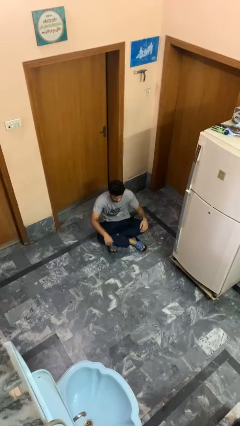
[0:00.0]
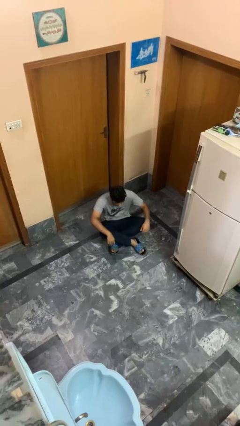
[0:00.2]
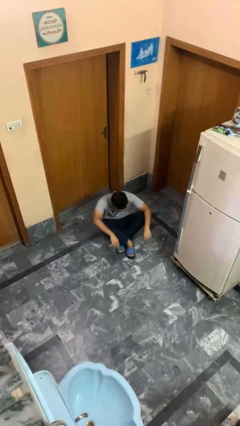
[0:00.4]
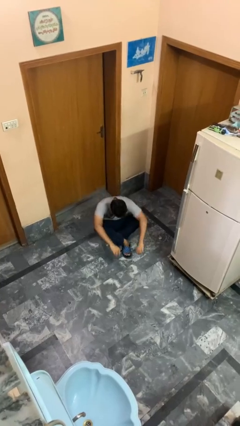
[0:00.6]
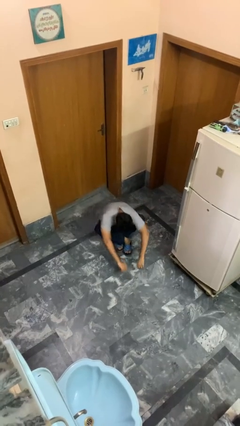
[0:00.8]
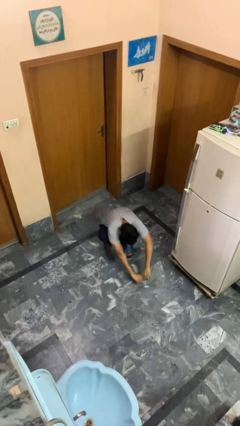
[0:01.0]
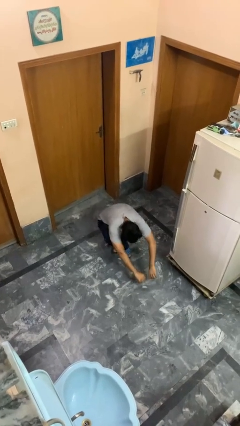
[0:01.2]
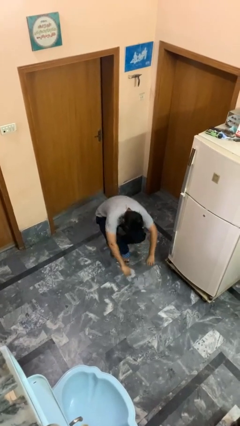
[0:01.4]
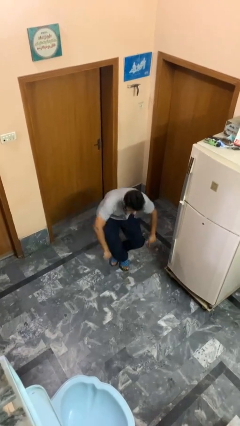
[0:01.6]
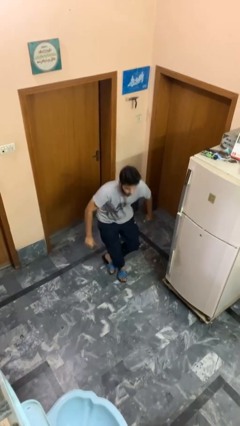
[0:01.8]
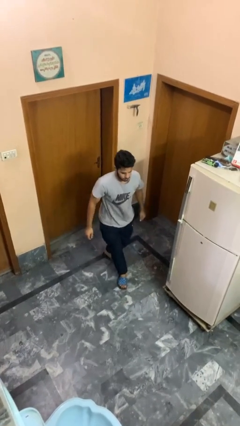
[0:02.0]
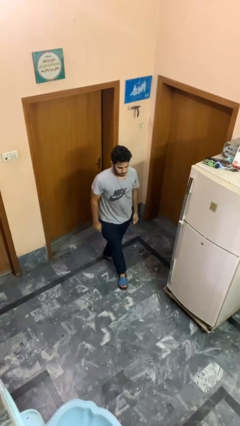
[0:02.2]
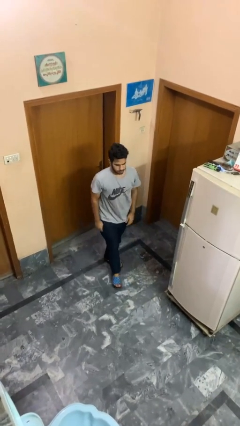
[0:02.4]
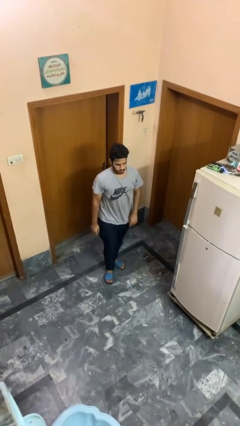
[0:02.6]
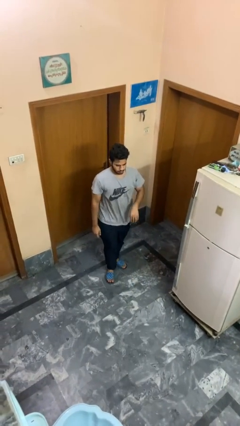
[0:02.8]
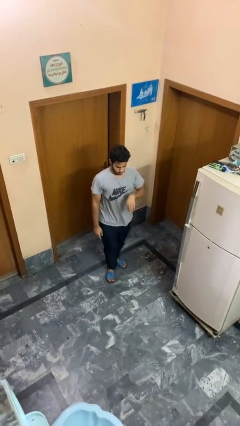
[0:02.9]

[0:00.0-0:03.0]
person stands up from floor

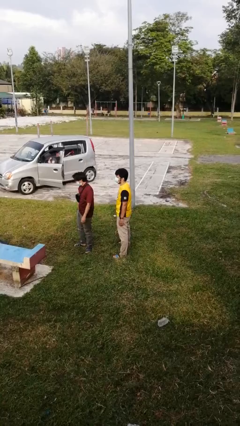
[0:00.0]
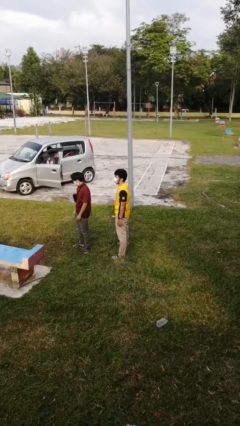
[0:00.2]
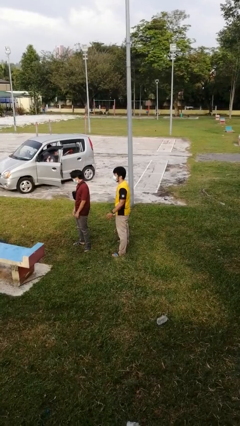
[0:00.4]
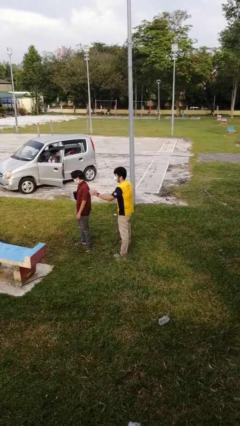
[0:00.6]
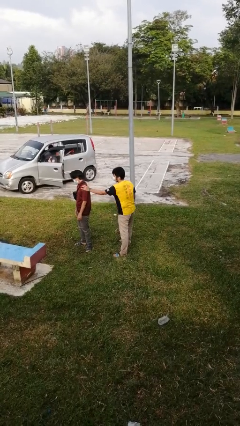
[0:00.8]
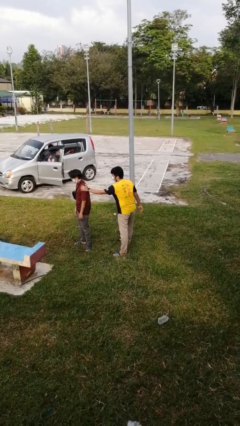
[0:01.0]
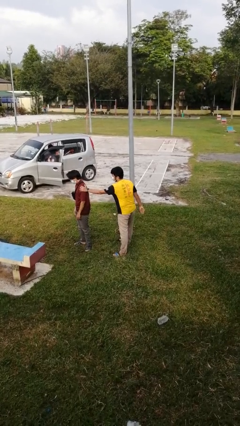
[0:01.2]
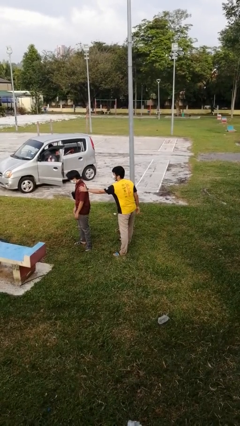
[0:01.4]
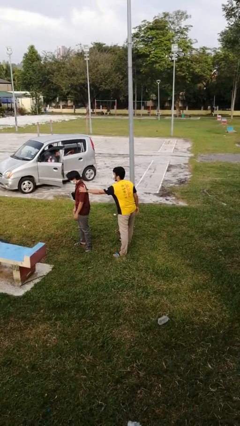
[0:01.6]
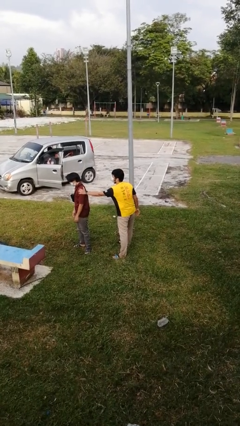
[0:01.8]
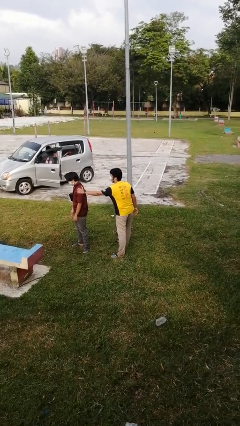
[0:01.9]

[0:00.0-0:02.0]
person grabs person by shoulder

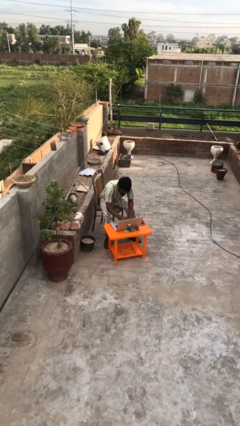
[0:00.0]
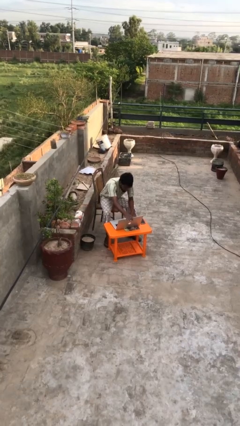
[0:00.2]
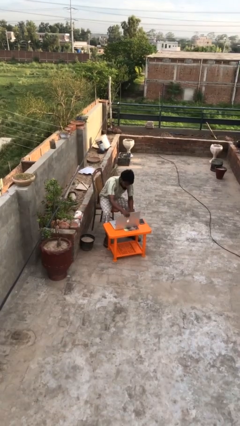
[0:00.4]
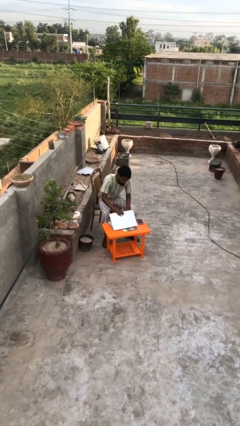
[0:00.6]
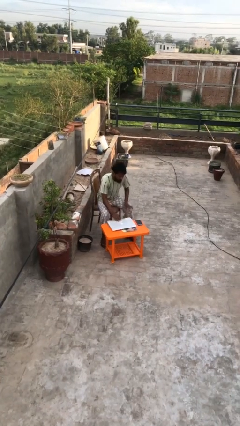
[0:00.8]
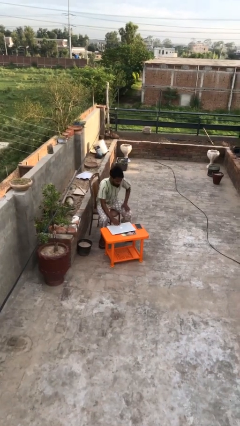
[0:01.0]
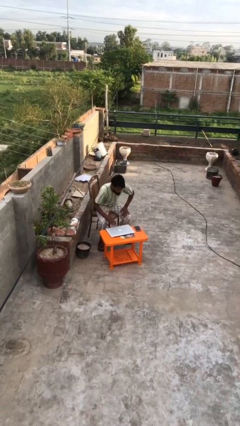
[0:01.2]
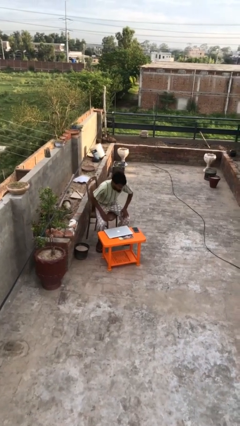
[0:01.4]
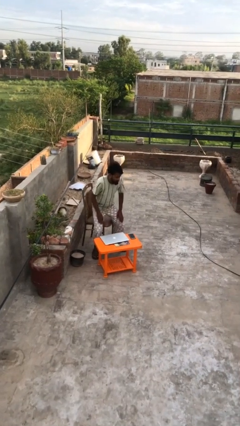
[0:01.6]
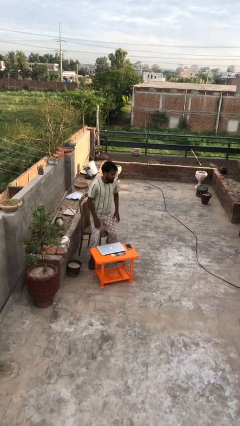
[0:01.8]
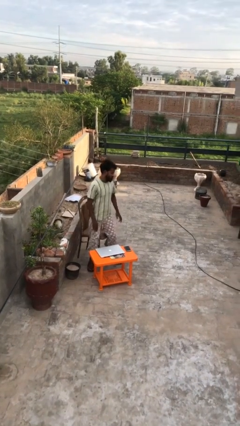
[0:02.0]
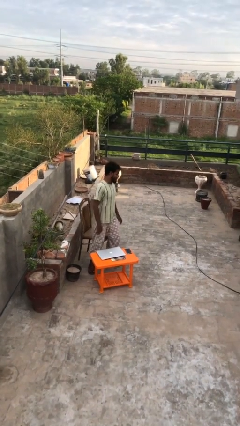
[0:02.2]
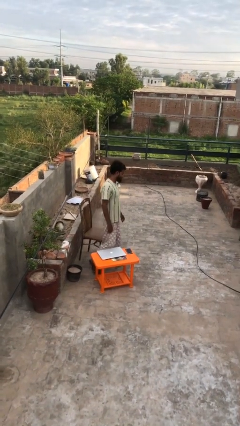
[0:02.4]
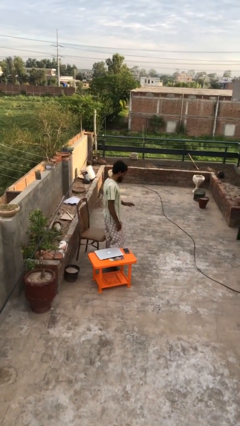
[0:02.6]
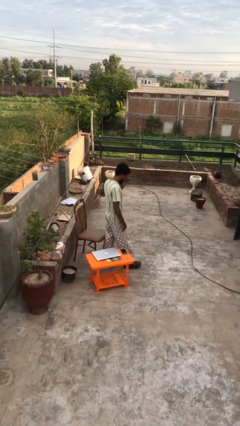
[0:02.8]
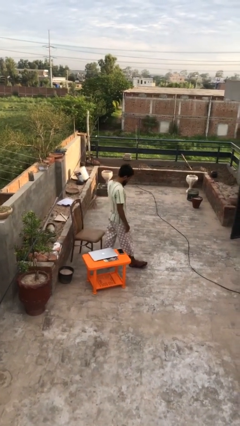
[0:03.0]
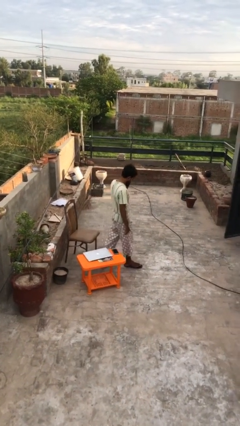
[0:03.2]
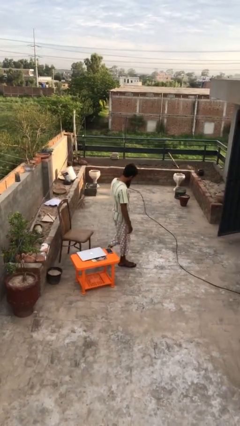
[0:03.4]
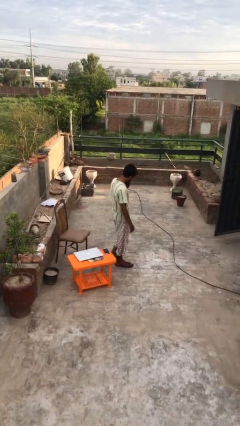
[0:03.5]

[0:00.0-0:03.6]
person stands up

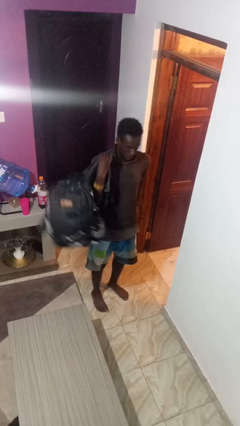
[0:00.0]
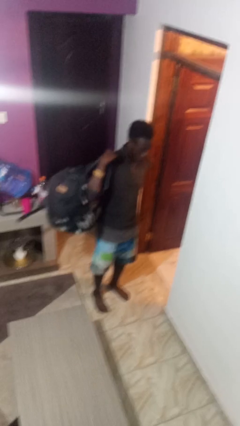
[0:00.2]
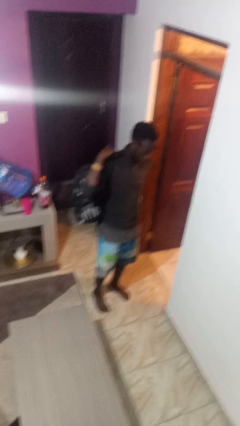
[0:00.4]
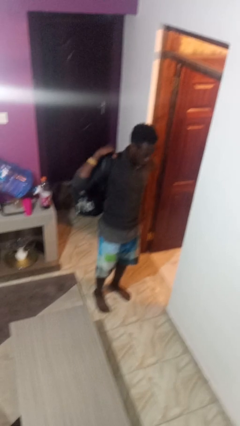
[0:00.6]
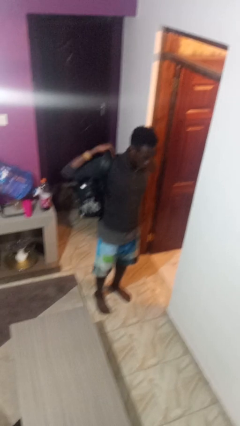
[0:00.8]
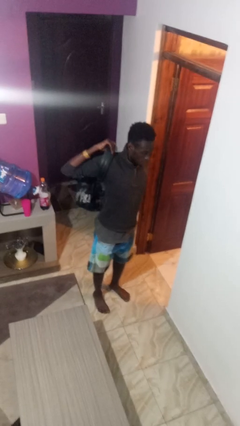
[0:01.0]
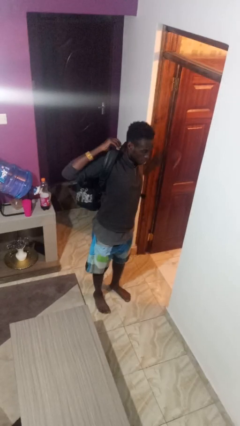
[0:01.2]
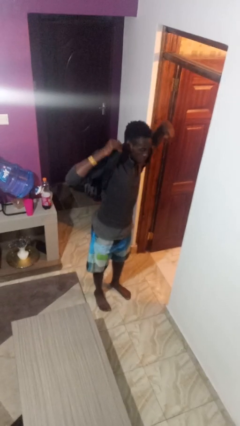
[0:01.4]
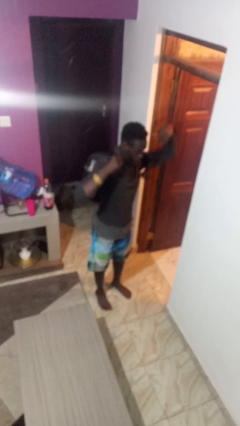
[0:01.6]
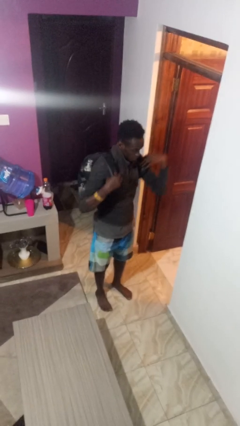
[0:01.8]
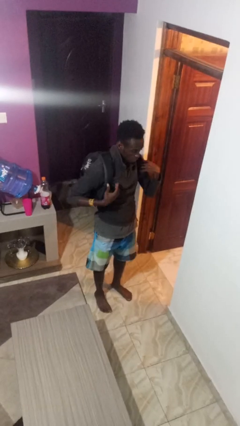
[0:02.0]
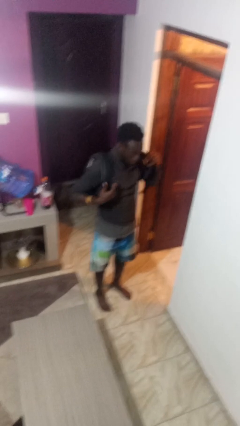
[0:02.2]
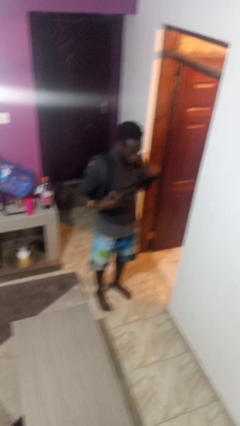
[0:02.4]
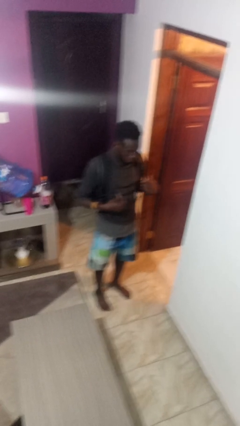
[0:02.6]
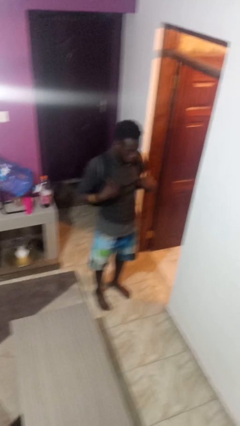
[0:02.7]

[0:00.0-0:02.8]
person puts on backpack

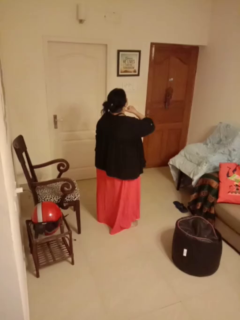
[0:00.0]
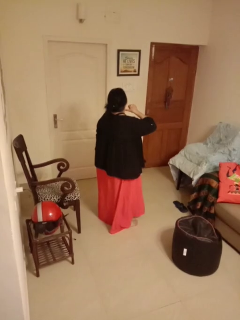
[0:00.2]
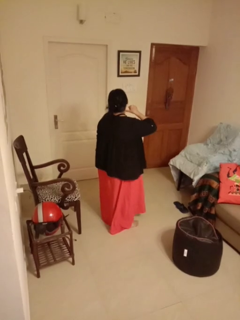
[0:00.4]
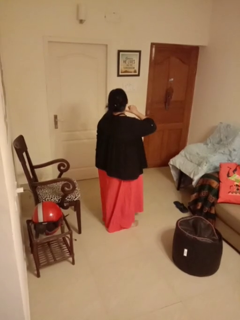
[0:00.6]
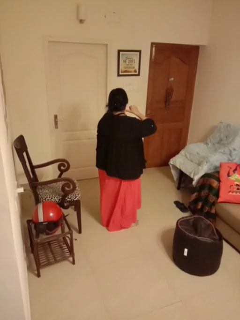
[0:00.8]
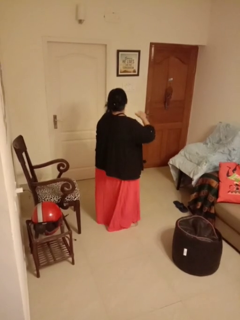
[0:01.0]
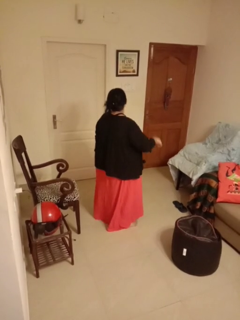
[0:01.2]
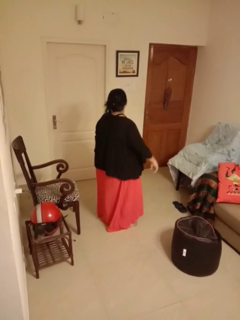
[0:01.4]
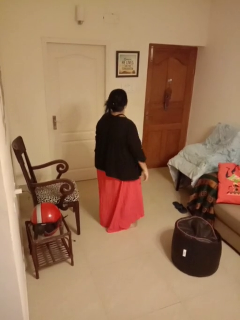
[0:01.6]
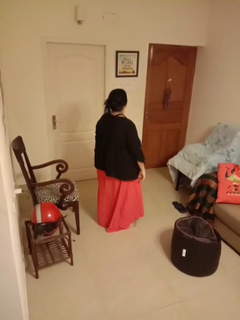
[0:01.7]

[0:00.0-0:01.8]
person gestures cut

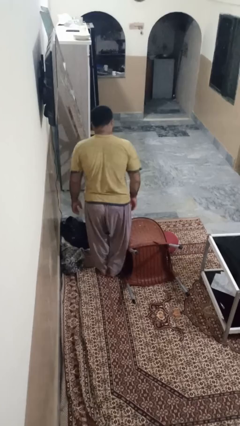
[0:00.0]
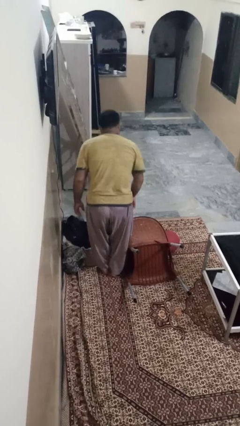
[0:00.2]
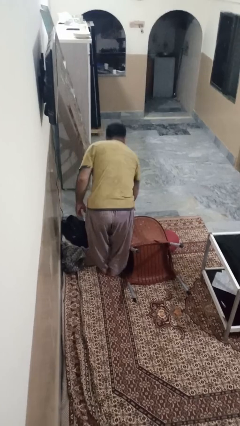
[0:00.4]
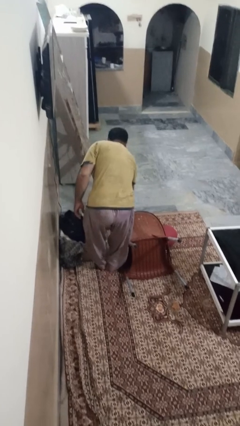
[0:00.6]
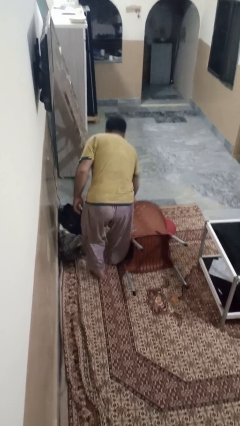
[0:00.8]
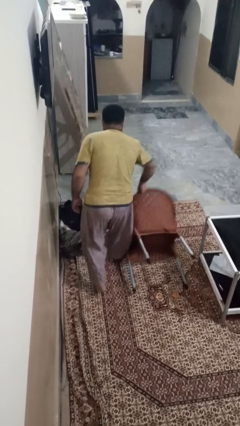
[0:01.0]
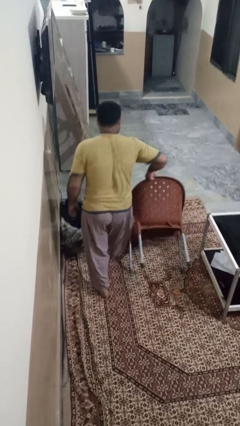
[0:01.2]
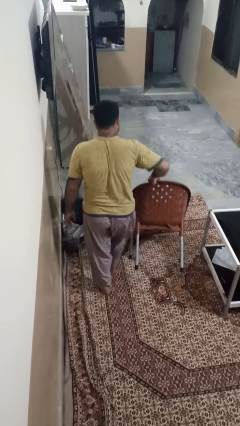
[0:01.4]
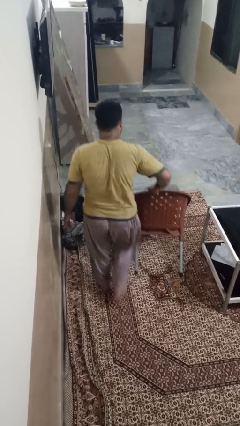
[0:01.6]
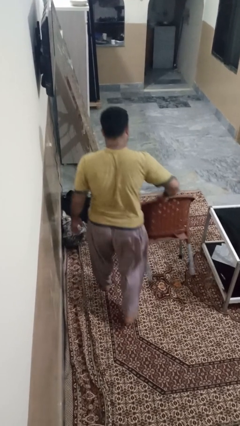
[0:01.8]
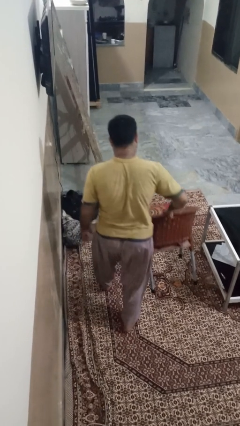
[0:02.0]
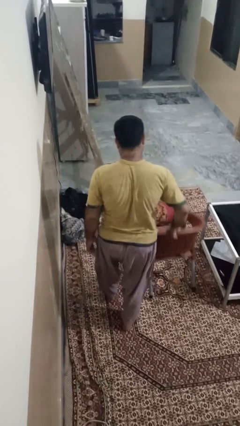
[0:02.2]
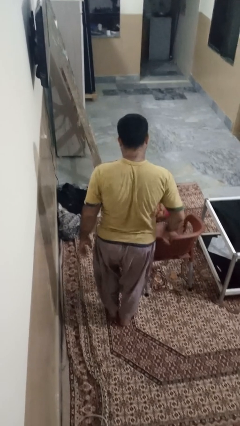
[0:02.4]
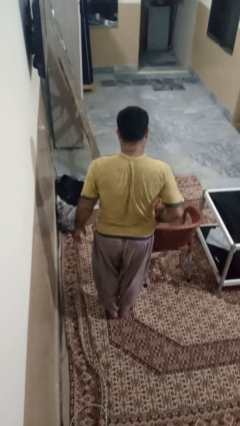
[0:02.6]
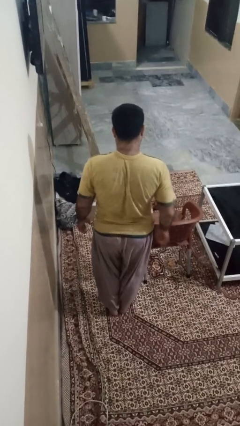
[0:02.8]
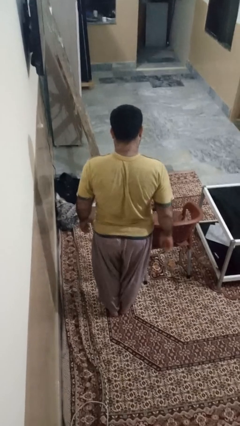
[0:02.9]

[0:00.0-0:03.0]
person sets upright furniture

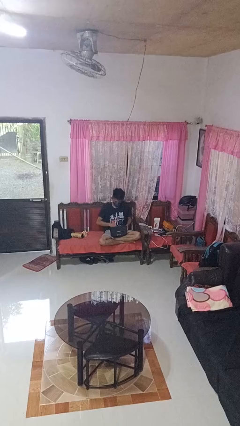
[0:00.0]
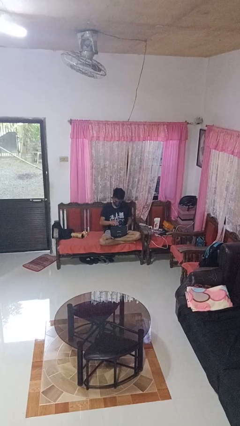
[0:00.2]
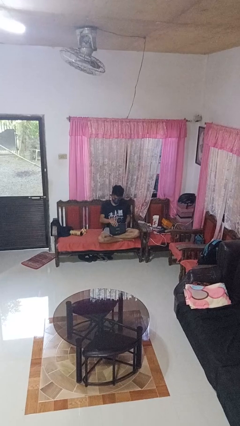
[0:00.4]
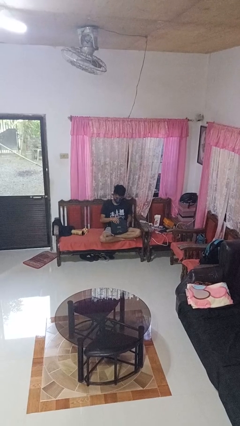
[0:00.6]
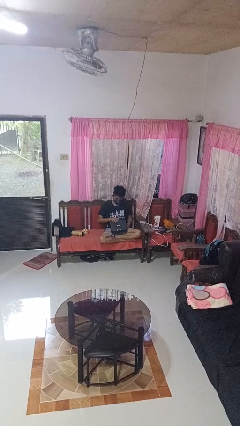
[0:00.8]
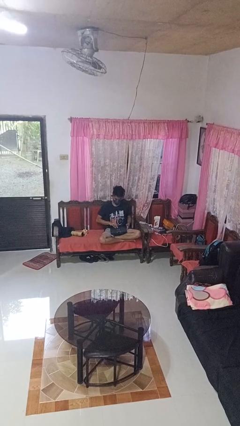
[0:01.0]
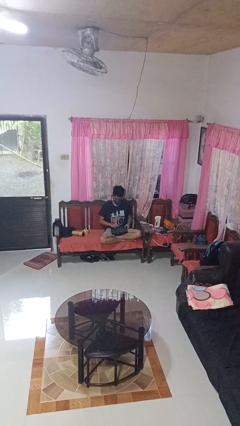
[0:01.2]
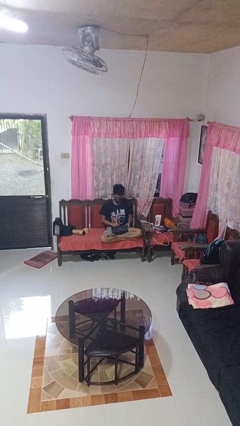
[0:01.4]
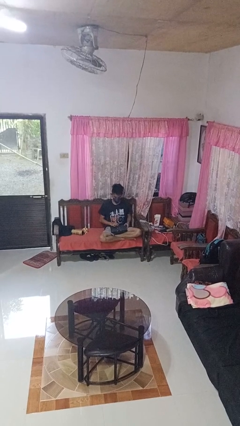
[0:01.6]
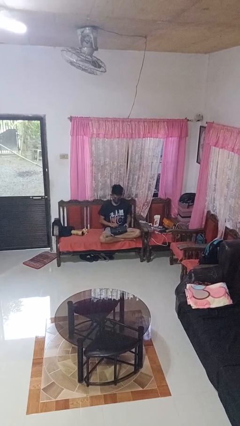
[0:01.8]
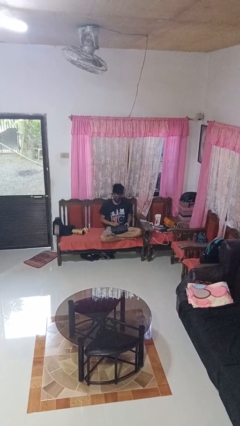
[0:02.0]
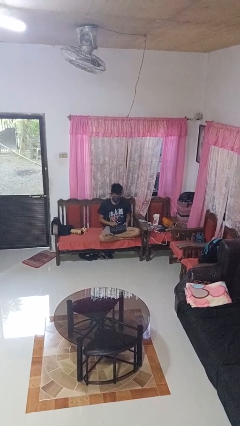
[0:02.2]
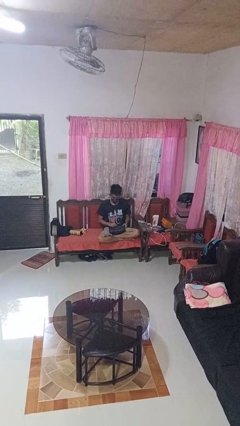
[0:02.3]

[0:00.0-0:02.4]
person closes laptop
